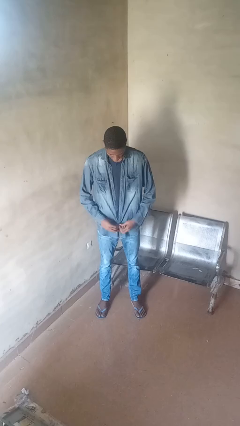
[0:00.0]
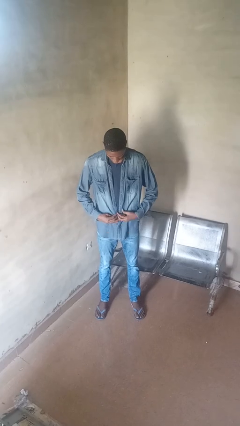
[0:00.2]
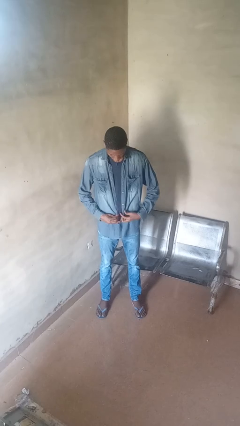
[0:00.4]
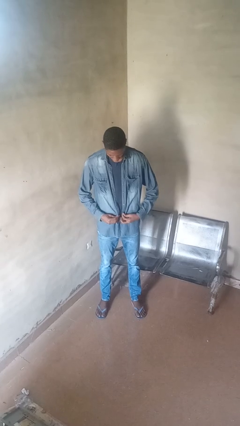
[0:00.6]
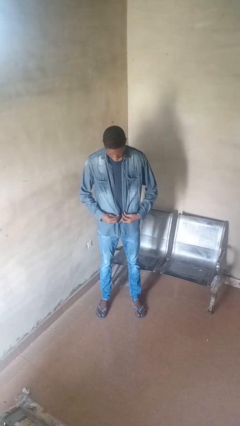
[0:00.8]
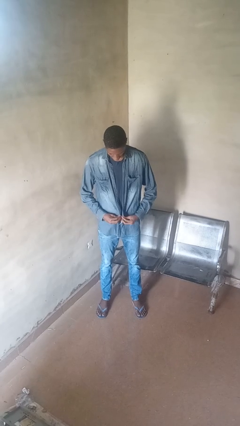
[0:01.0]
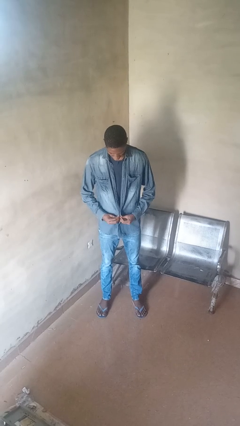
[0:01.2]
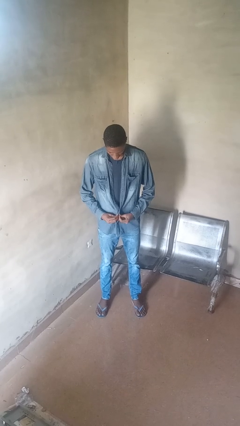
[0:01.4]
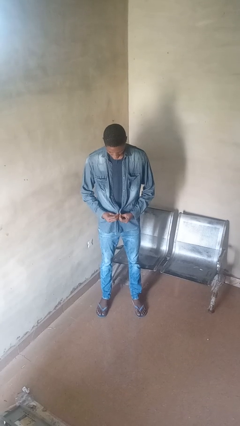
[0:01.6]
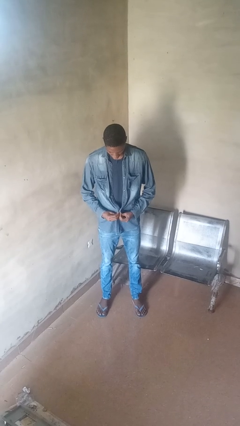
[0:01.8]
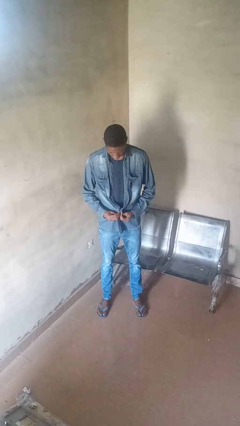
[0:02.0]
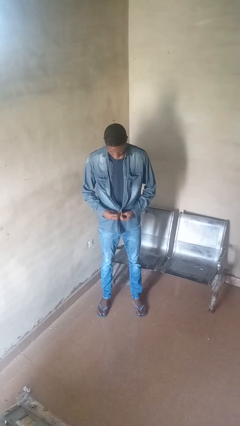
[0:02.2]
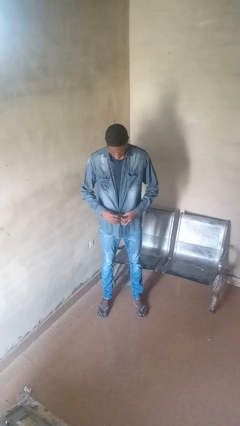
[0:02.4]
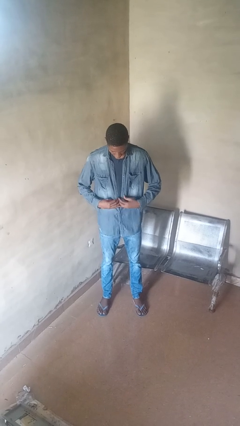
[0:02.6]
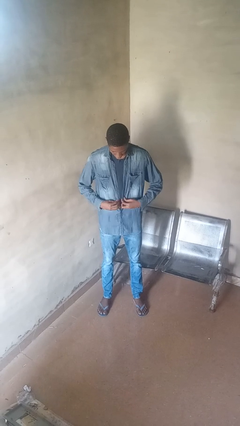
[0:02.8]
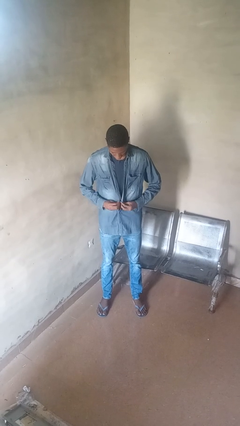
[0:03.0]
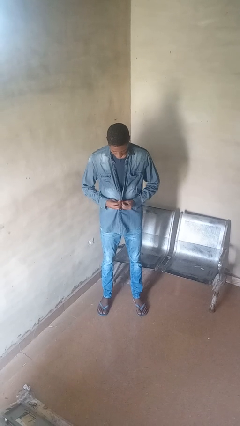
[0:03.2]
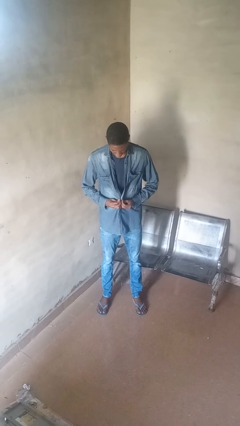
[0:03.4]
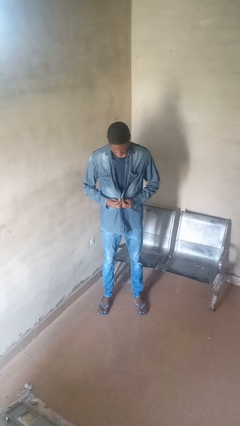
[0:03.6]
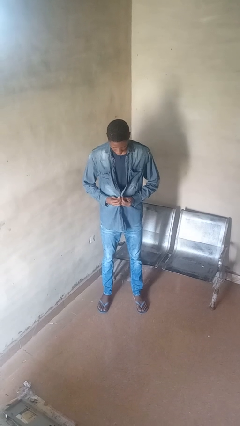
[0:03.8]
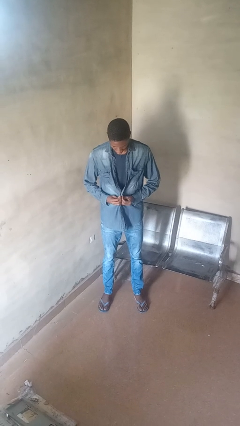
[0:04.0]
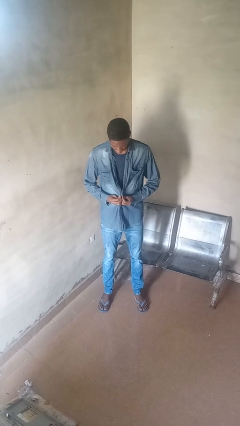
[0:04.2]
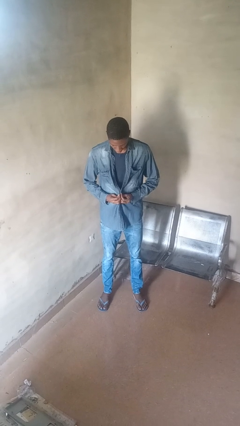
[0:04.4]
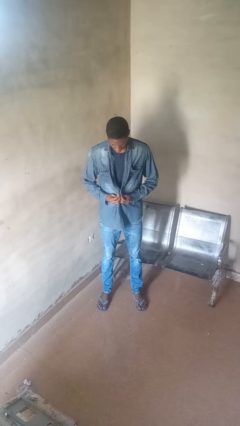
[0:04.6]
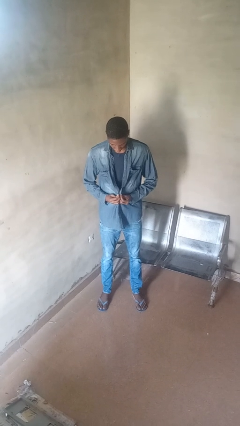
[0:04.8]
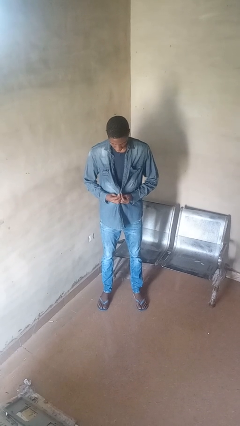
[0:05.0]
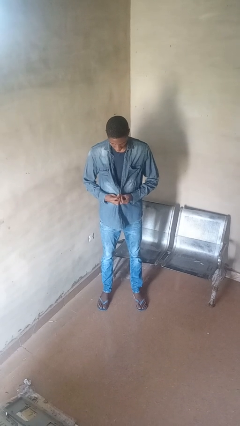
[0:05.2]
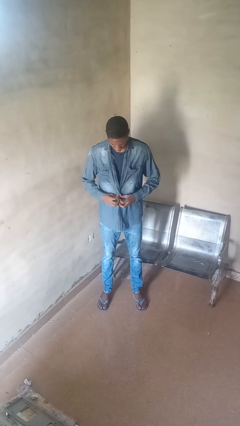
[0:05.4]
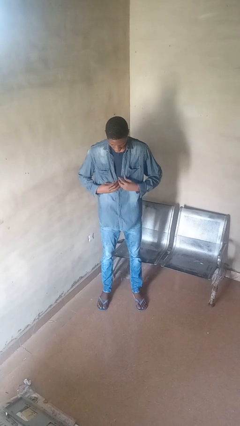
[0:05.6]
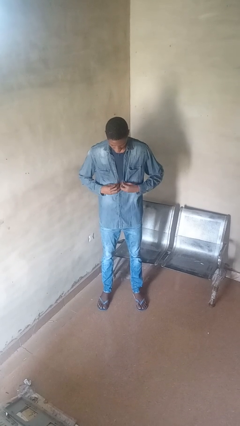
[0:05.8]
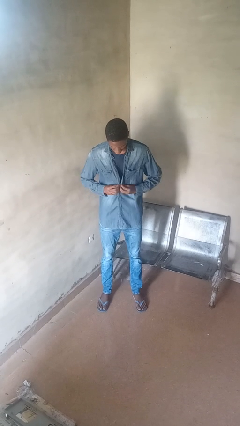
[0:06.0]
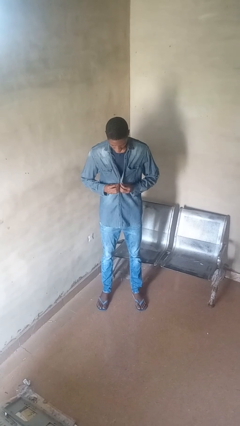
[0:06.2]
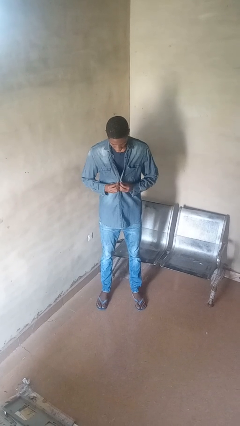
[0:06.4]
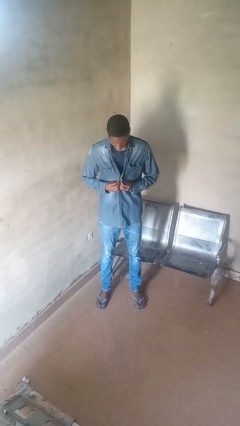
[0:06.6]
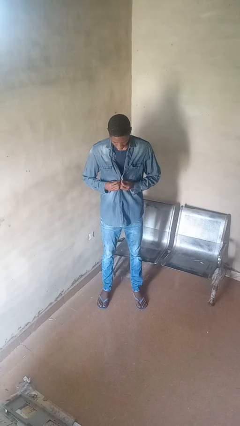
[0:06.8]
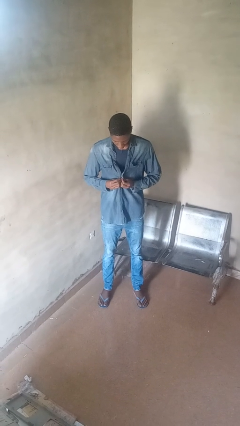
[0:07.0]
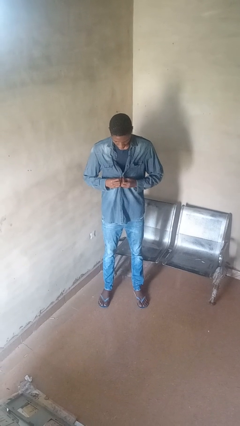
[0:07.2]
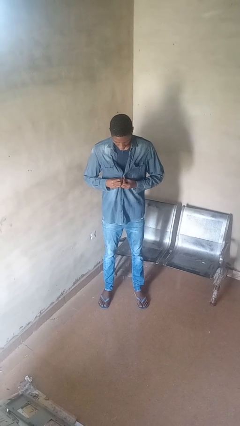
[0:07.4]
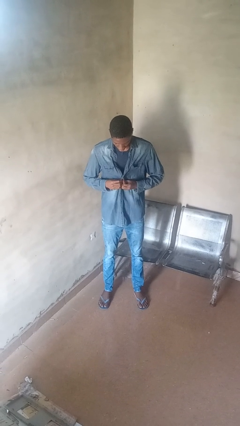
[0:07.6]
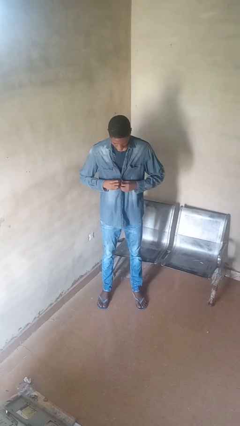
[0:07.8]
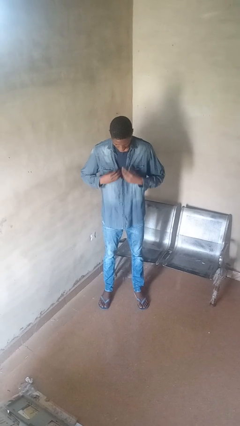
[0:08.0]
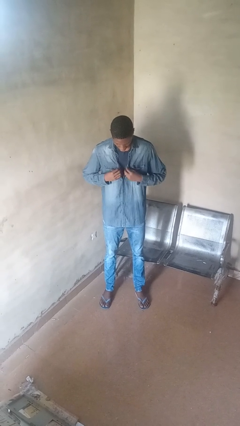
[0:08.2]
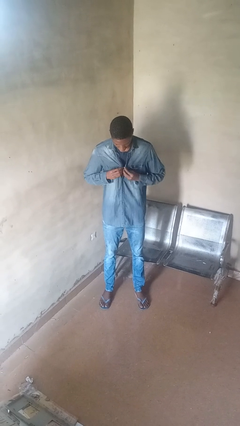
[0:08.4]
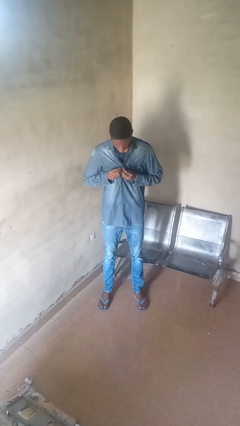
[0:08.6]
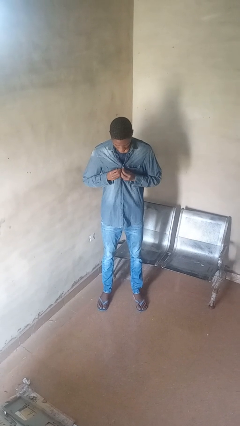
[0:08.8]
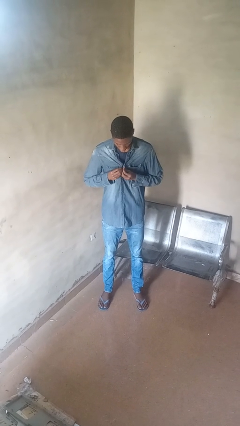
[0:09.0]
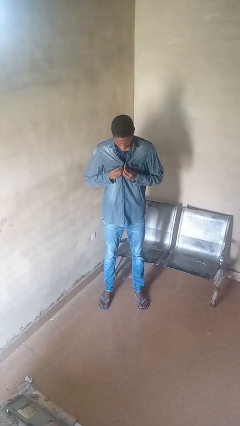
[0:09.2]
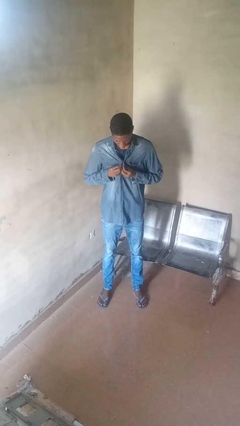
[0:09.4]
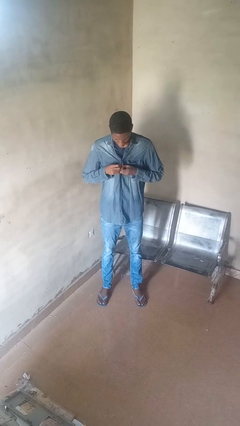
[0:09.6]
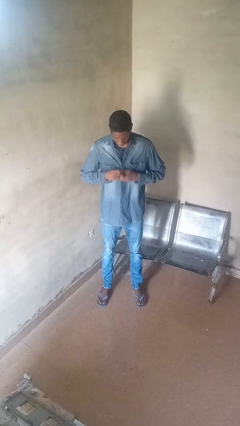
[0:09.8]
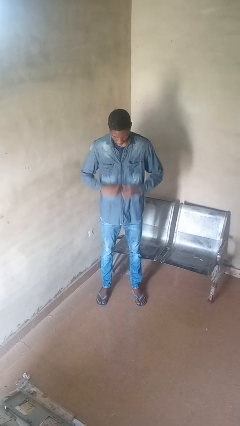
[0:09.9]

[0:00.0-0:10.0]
person buttons shirt

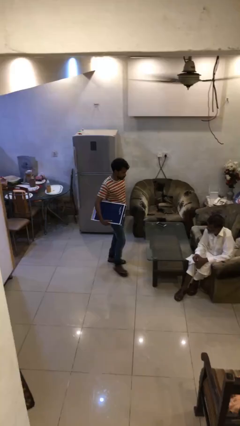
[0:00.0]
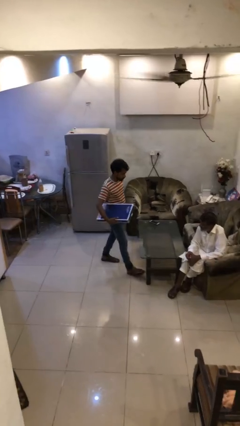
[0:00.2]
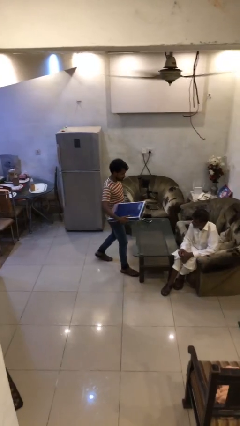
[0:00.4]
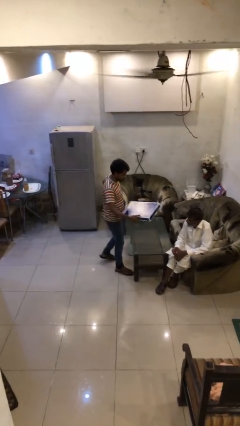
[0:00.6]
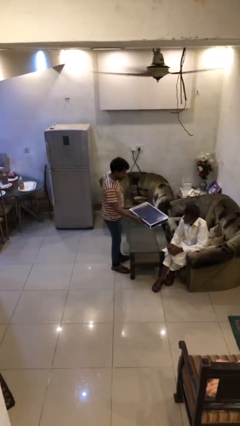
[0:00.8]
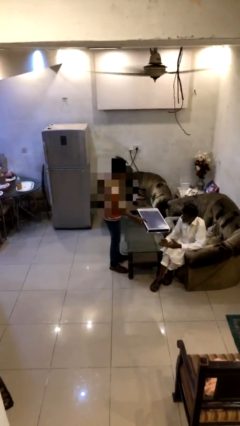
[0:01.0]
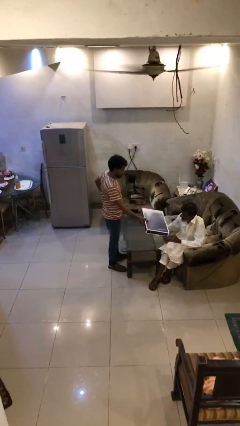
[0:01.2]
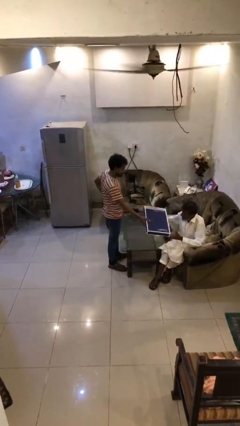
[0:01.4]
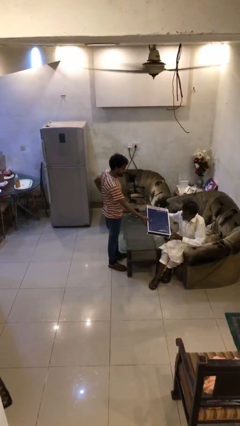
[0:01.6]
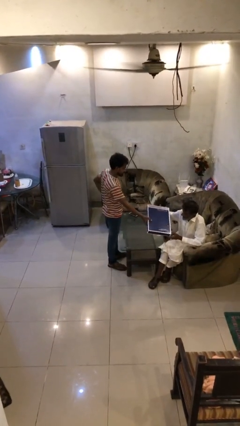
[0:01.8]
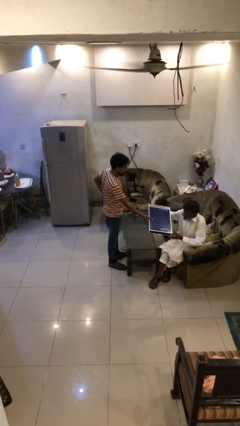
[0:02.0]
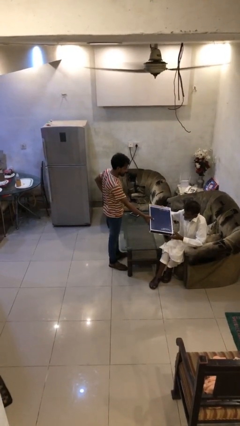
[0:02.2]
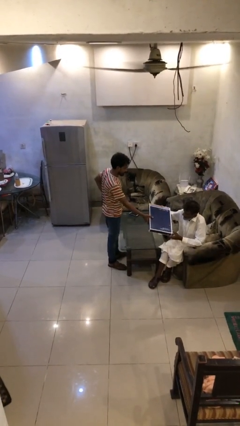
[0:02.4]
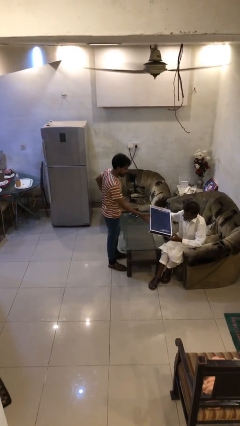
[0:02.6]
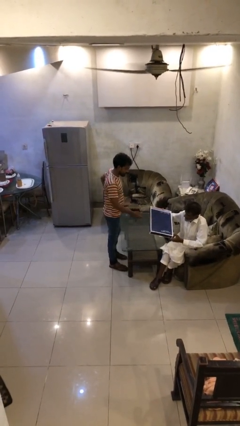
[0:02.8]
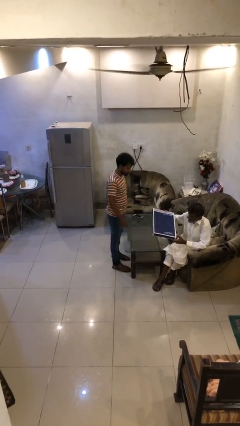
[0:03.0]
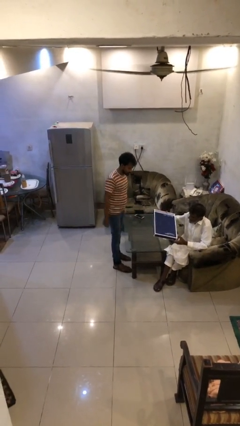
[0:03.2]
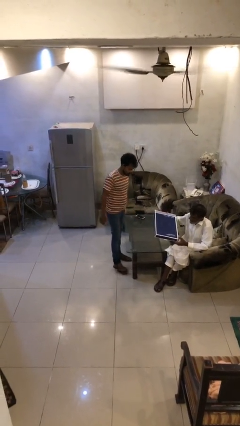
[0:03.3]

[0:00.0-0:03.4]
person transfers object to person

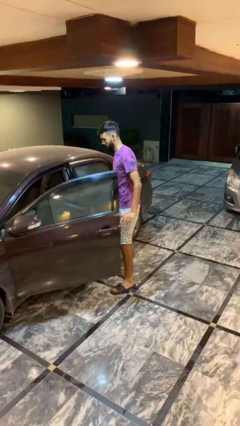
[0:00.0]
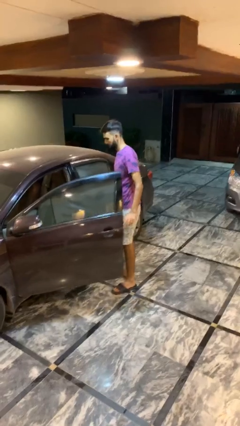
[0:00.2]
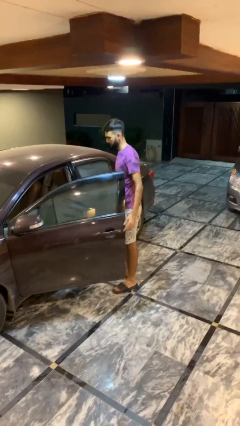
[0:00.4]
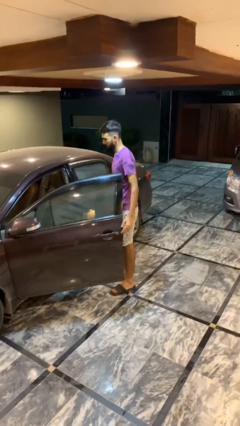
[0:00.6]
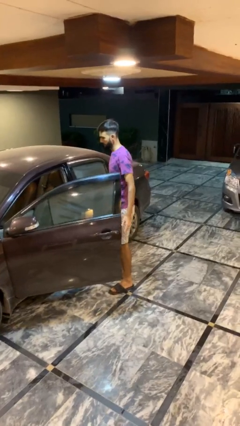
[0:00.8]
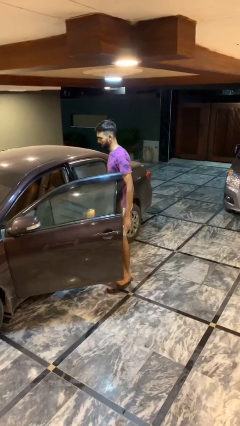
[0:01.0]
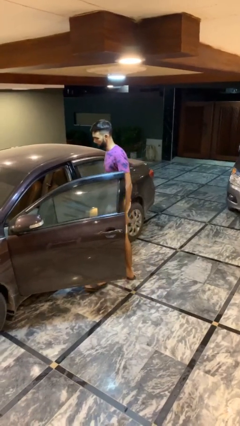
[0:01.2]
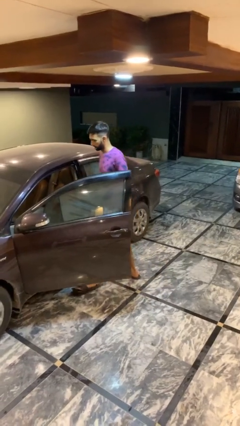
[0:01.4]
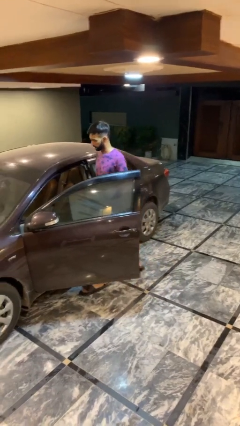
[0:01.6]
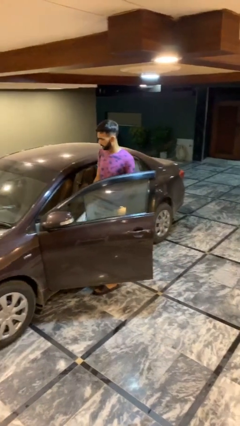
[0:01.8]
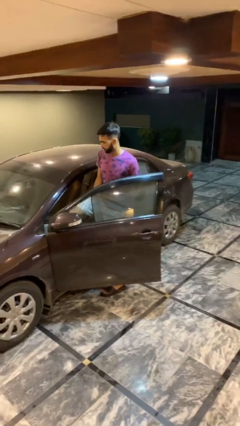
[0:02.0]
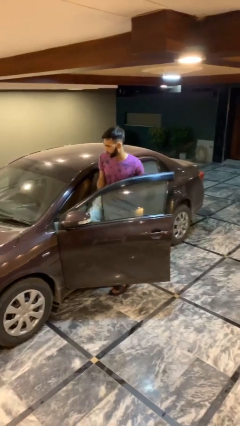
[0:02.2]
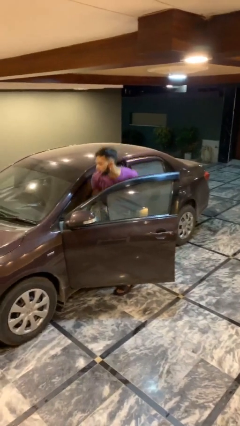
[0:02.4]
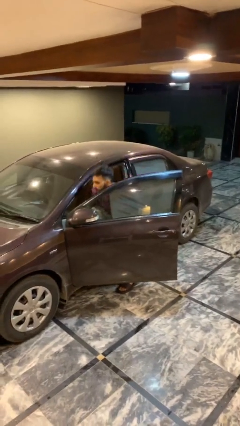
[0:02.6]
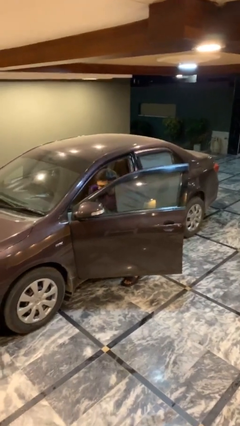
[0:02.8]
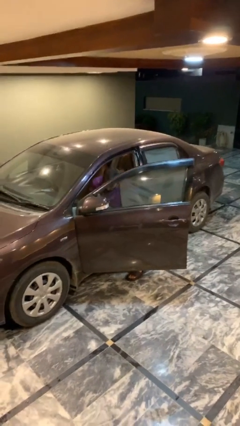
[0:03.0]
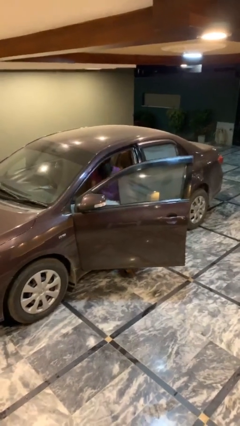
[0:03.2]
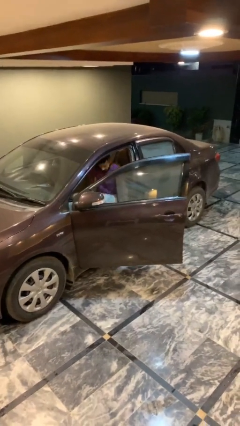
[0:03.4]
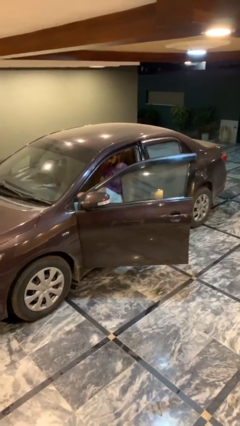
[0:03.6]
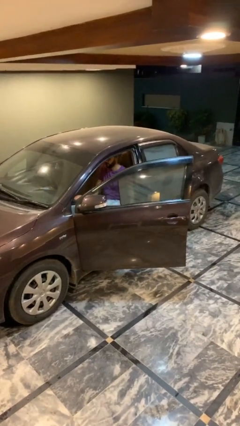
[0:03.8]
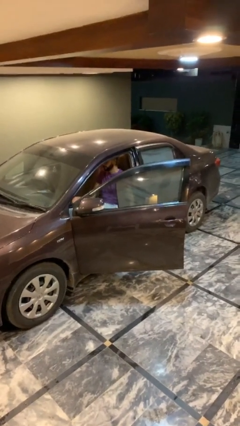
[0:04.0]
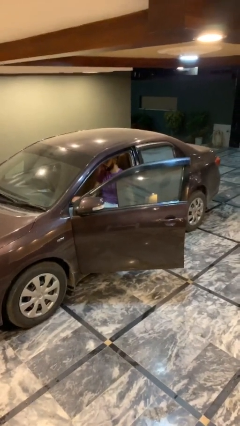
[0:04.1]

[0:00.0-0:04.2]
person enters car

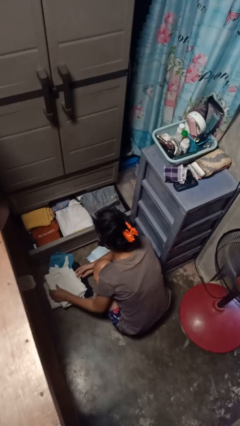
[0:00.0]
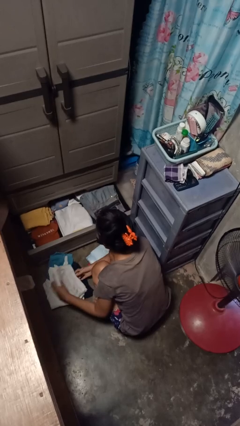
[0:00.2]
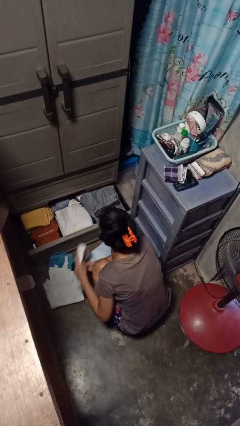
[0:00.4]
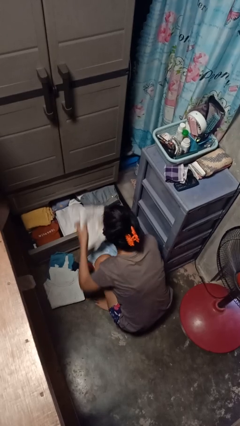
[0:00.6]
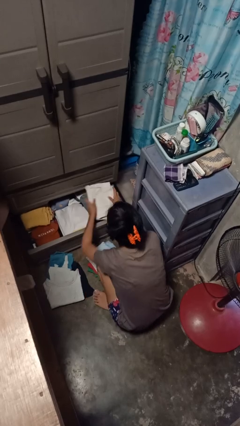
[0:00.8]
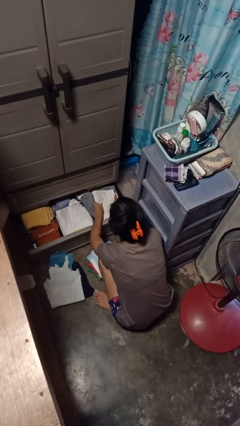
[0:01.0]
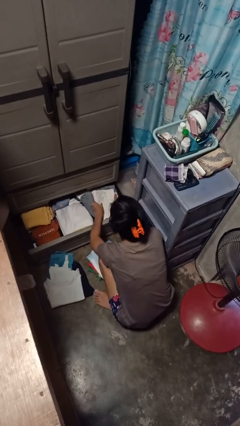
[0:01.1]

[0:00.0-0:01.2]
person puts clothes into dresser
